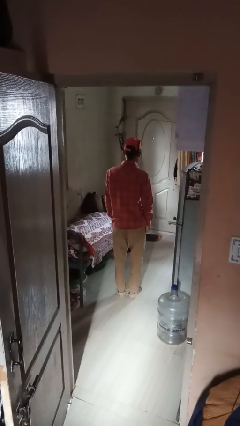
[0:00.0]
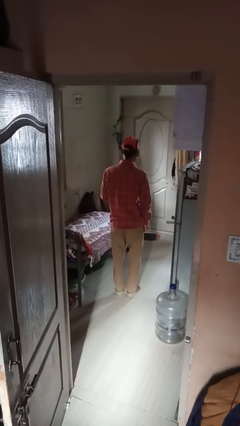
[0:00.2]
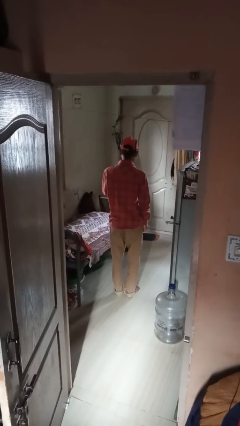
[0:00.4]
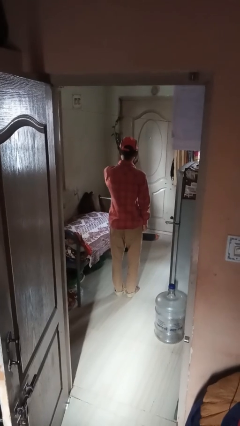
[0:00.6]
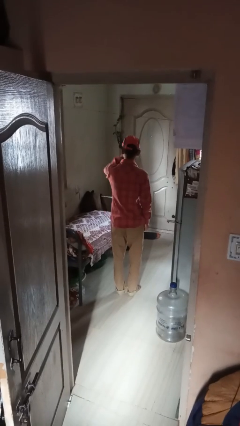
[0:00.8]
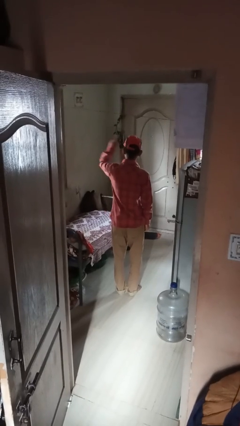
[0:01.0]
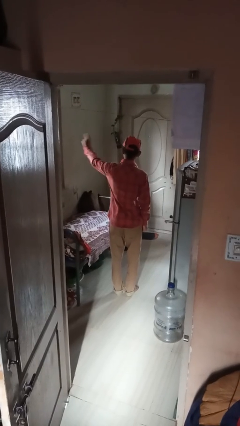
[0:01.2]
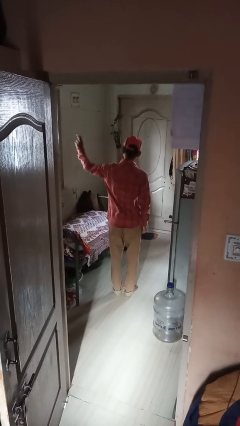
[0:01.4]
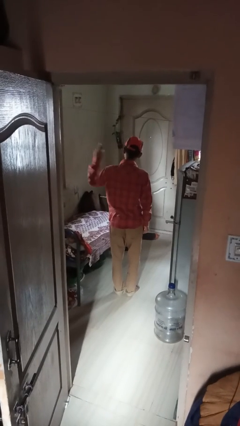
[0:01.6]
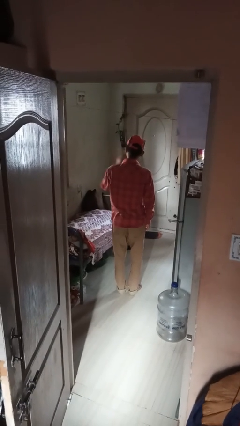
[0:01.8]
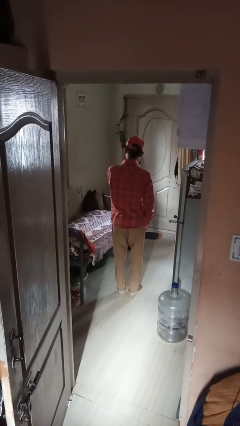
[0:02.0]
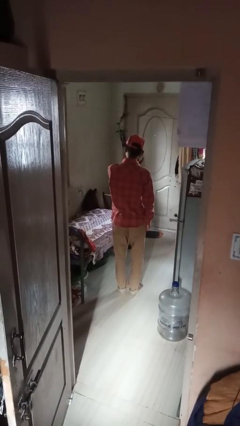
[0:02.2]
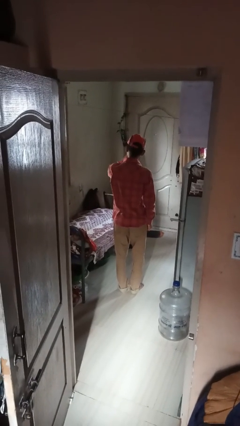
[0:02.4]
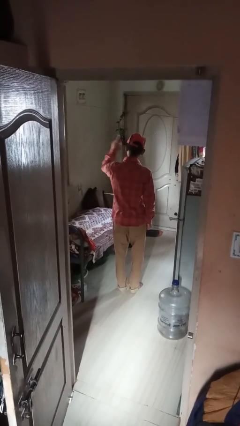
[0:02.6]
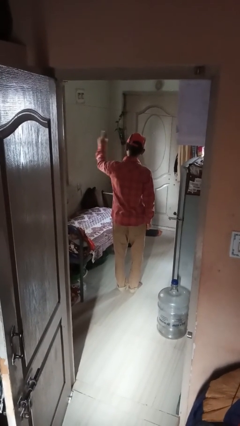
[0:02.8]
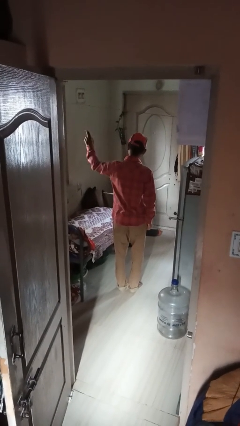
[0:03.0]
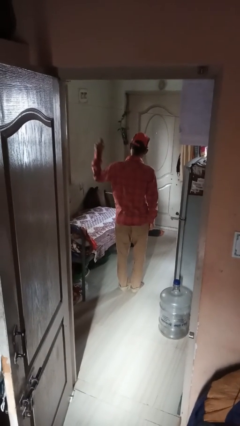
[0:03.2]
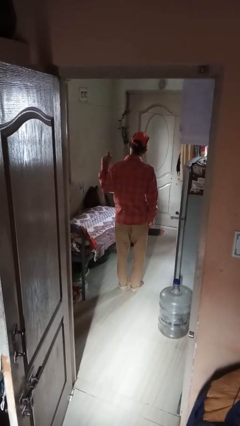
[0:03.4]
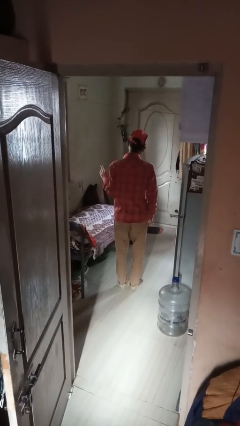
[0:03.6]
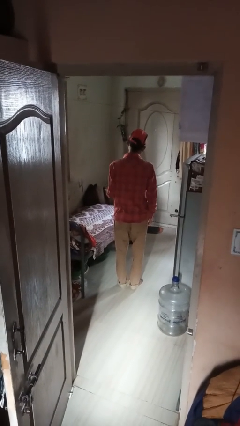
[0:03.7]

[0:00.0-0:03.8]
person gestures swipe left

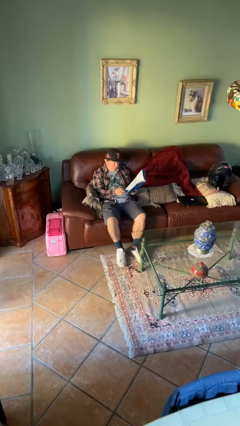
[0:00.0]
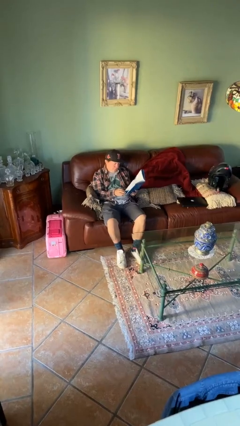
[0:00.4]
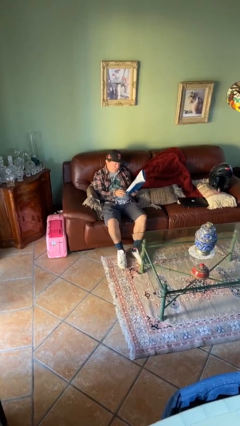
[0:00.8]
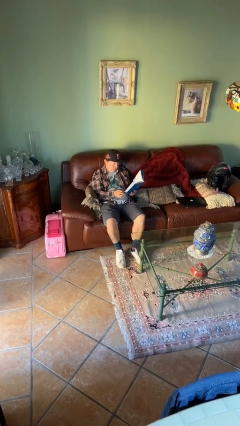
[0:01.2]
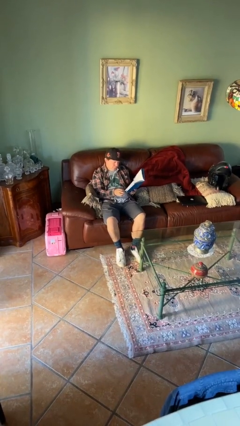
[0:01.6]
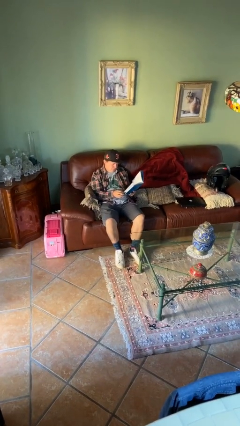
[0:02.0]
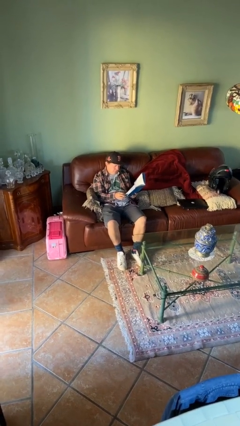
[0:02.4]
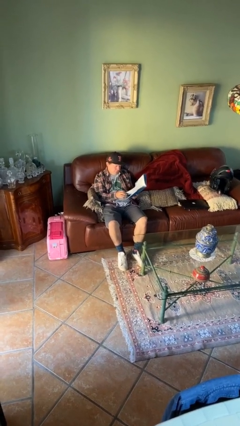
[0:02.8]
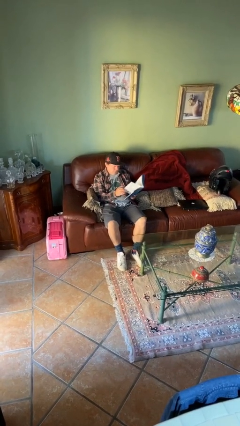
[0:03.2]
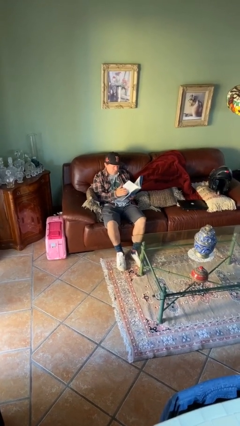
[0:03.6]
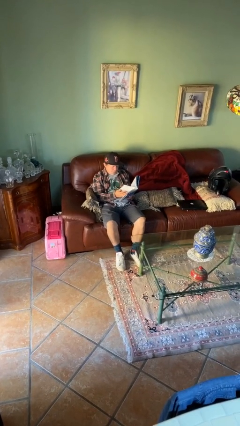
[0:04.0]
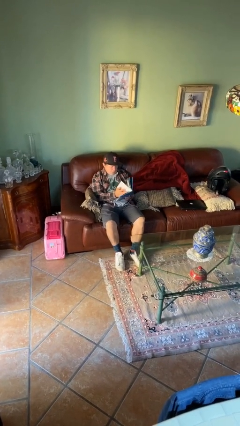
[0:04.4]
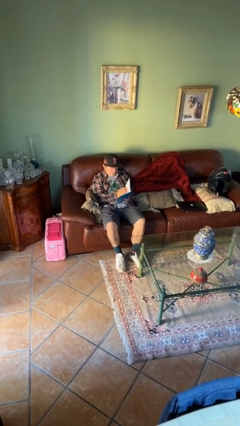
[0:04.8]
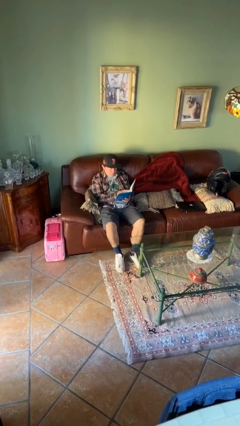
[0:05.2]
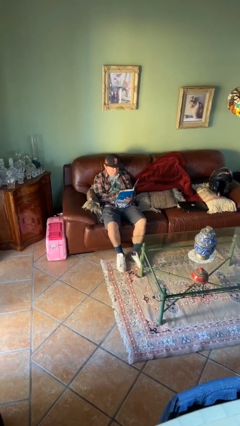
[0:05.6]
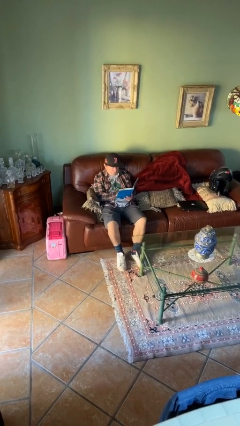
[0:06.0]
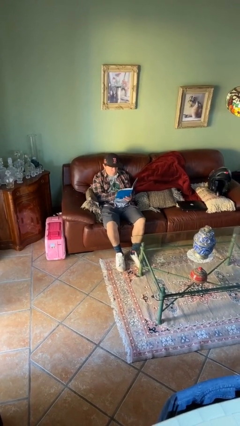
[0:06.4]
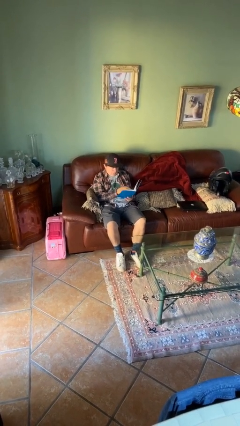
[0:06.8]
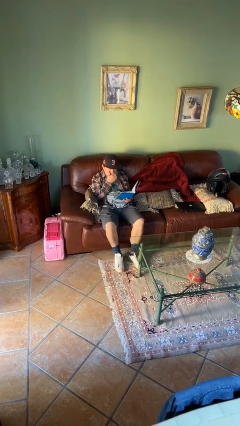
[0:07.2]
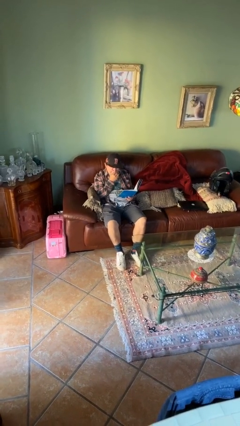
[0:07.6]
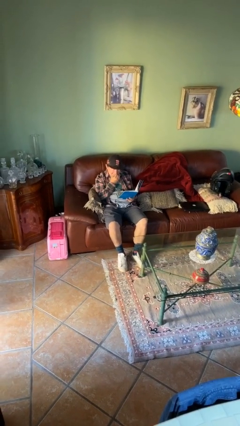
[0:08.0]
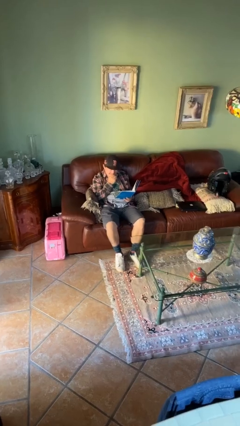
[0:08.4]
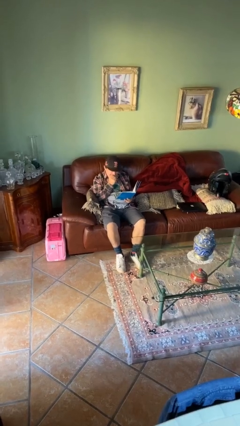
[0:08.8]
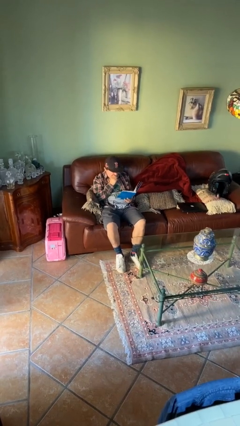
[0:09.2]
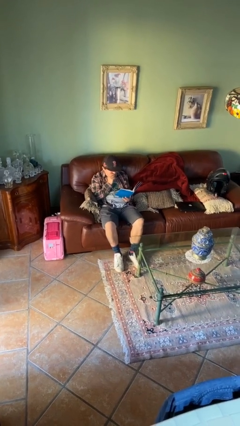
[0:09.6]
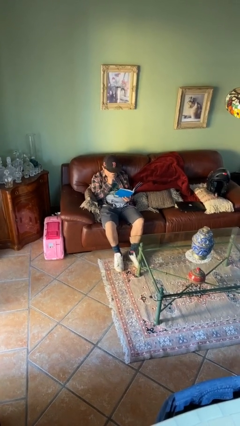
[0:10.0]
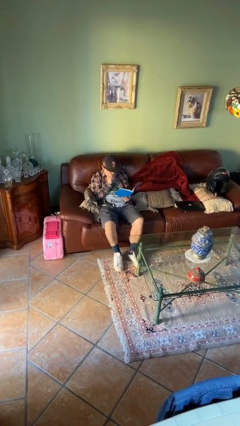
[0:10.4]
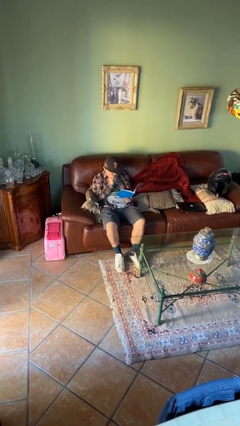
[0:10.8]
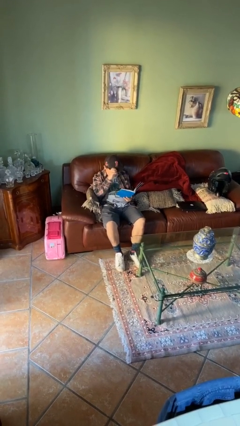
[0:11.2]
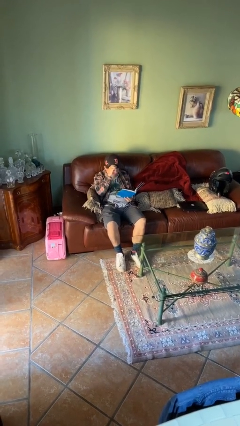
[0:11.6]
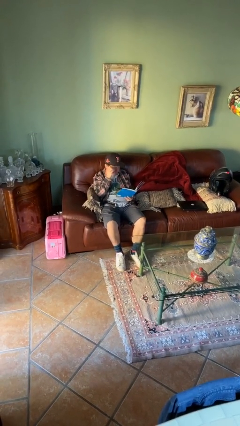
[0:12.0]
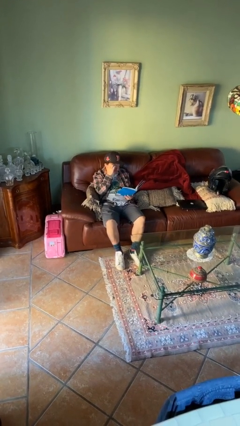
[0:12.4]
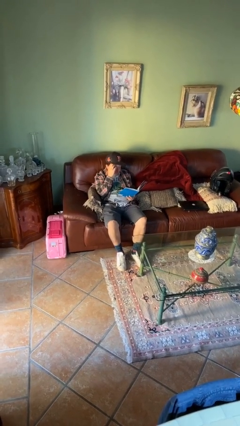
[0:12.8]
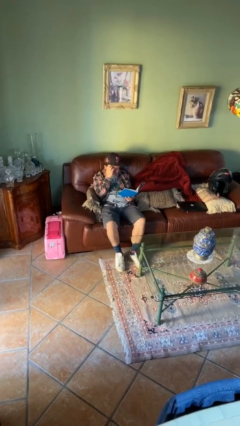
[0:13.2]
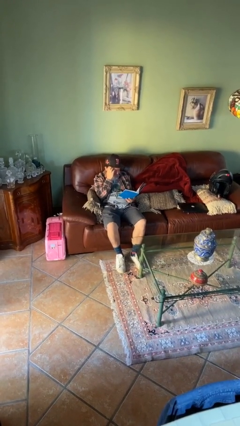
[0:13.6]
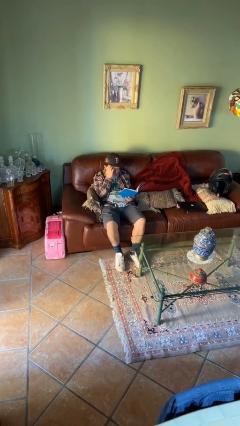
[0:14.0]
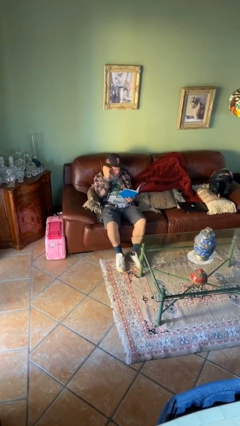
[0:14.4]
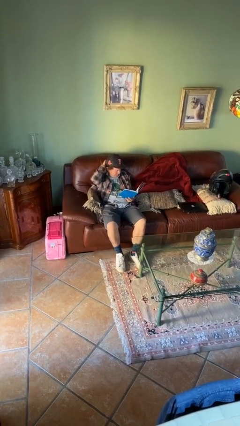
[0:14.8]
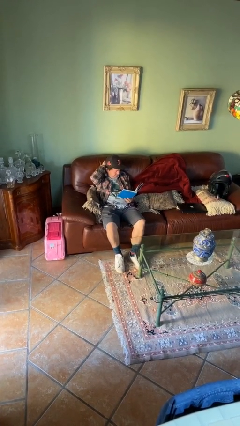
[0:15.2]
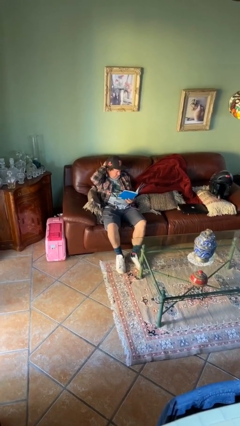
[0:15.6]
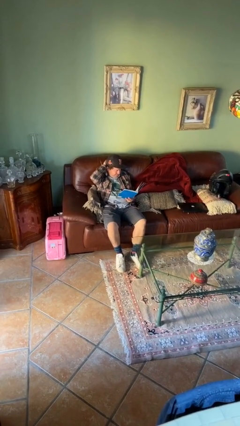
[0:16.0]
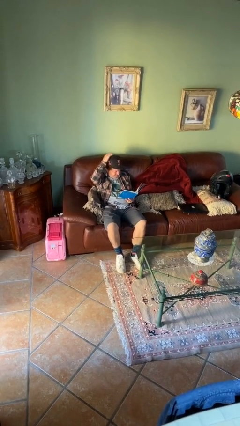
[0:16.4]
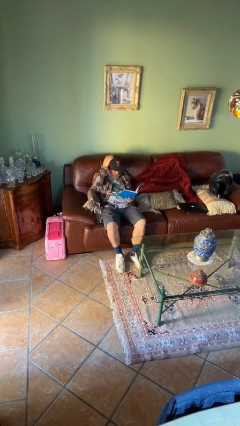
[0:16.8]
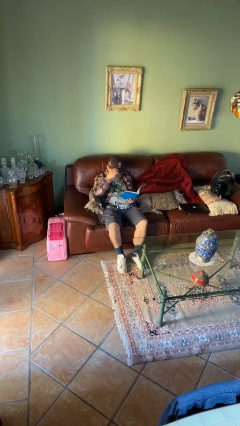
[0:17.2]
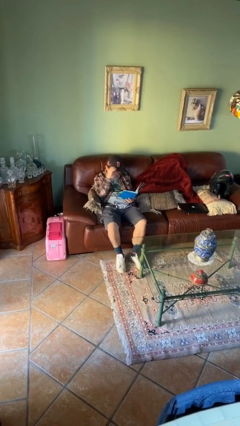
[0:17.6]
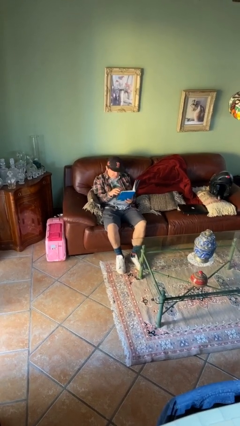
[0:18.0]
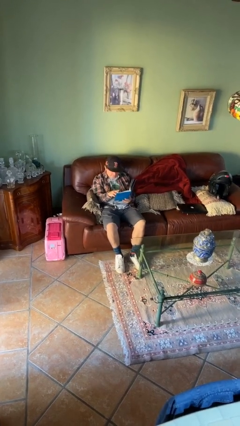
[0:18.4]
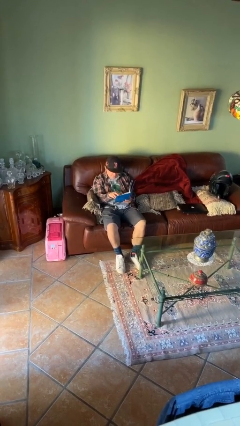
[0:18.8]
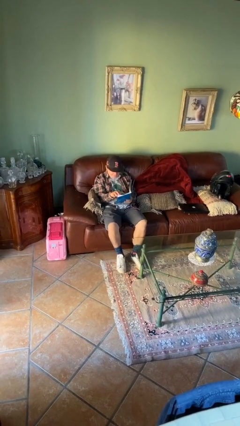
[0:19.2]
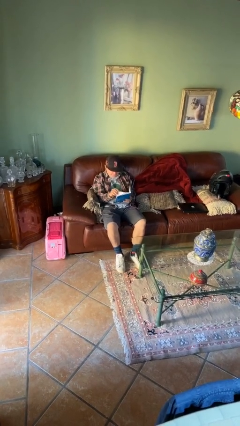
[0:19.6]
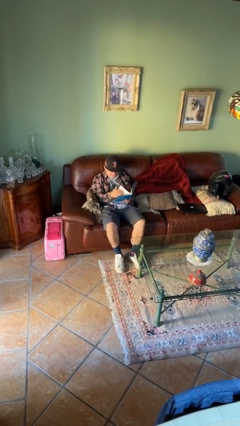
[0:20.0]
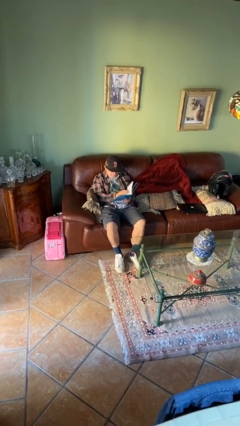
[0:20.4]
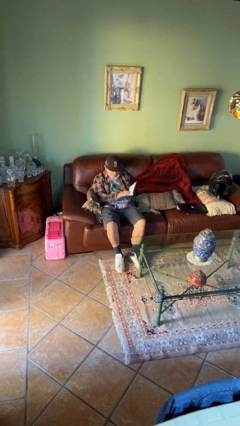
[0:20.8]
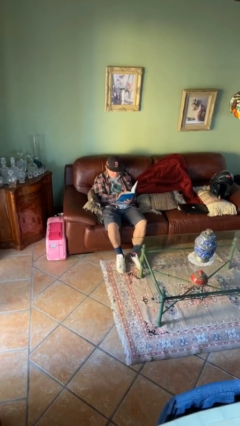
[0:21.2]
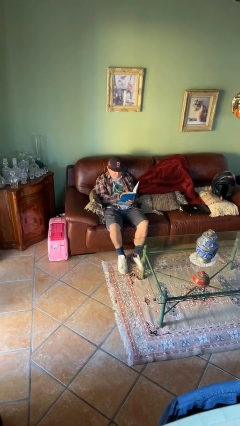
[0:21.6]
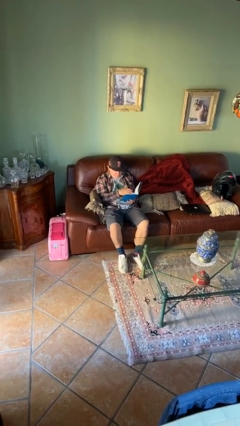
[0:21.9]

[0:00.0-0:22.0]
person reads document

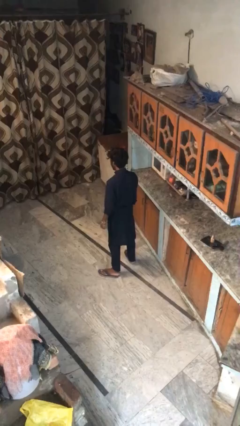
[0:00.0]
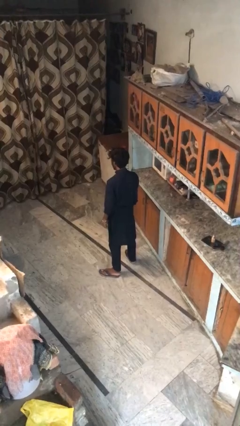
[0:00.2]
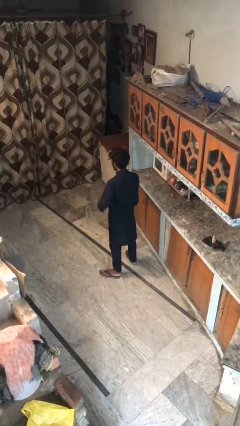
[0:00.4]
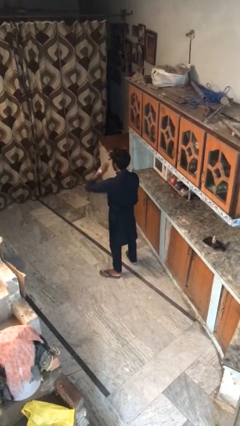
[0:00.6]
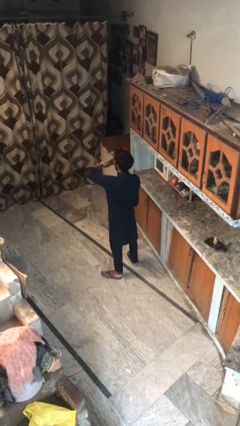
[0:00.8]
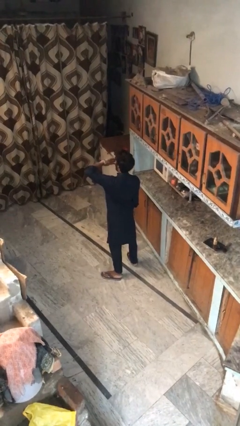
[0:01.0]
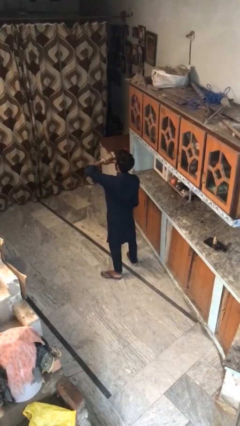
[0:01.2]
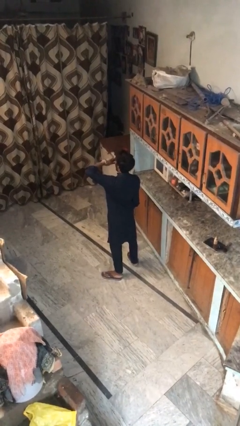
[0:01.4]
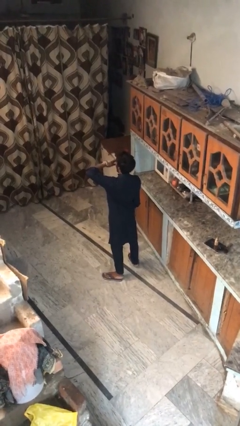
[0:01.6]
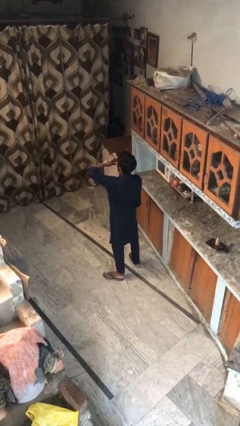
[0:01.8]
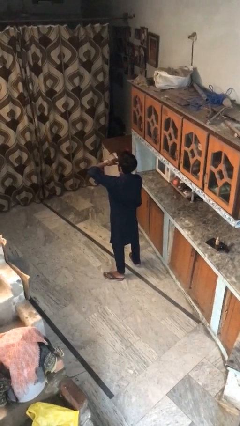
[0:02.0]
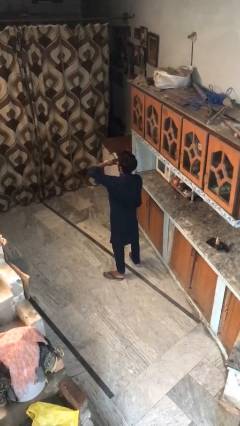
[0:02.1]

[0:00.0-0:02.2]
person yawns

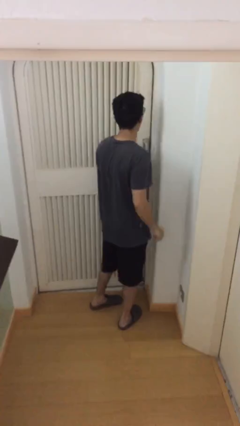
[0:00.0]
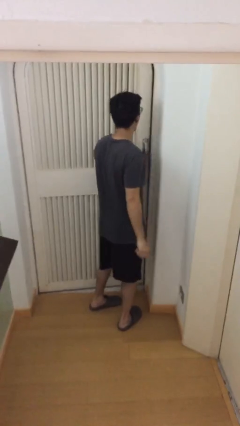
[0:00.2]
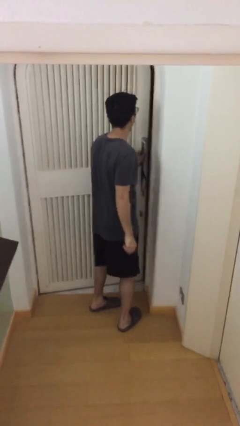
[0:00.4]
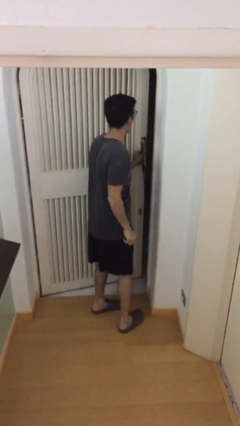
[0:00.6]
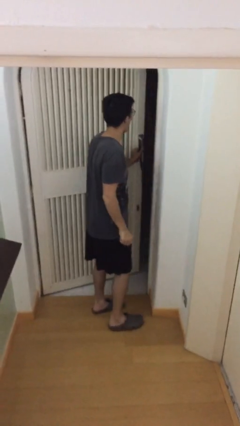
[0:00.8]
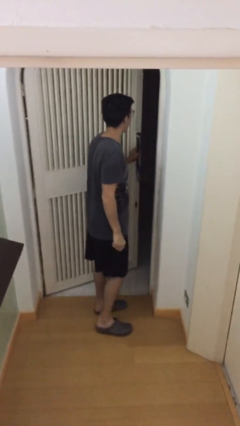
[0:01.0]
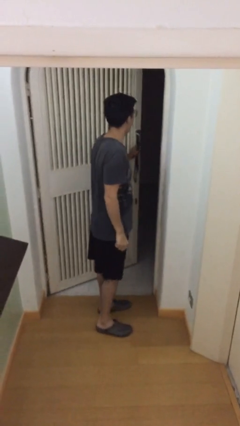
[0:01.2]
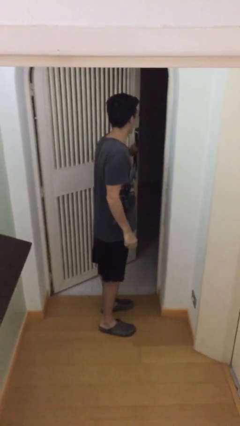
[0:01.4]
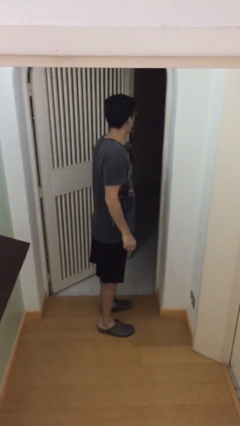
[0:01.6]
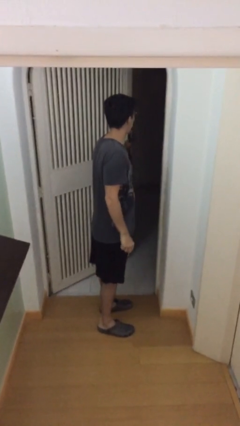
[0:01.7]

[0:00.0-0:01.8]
person opens facility door
